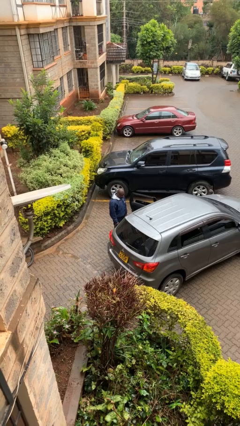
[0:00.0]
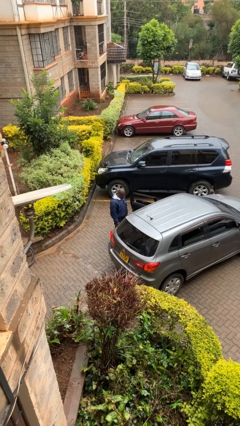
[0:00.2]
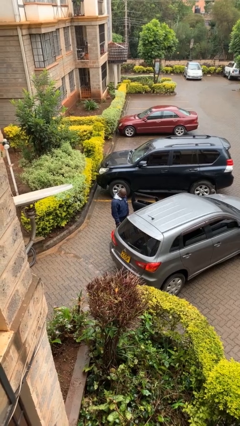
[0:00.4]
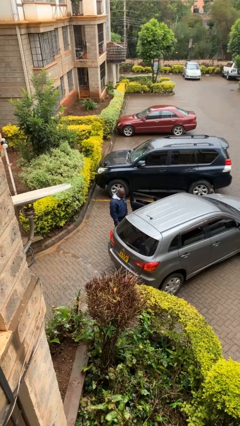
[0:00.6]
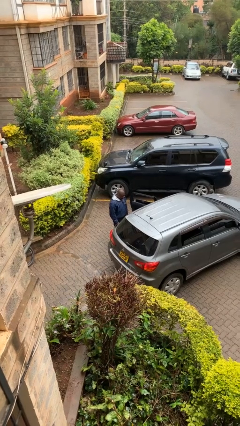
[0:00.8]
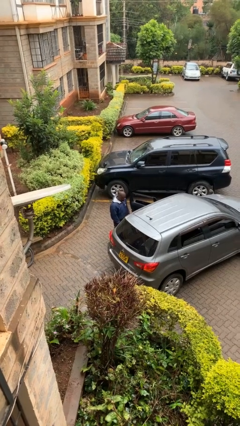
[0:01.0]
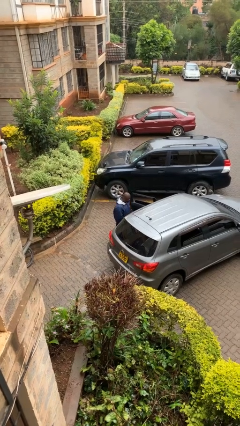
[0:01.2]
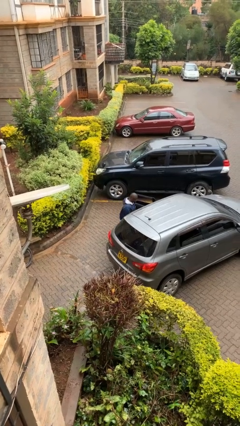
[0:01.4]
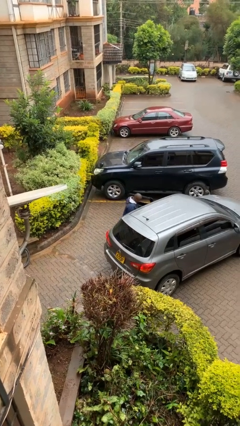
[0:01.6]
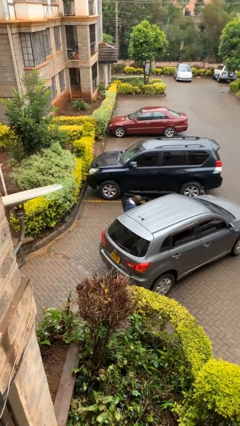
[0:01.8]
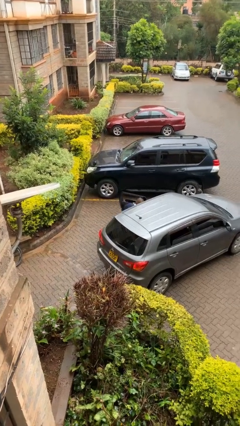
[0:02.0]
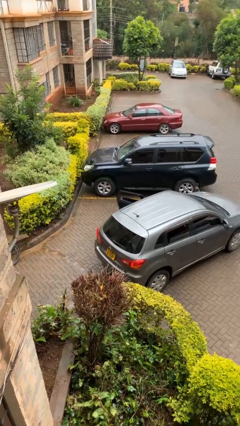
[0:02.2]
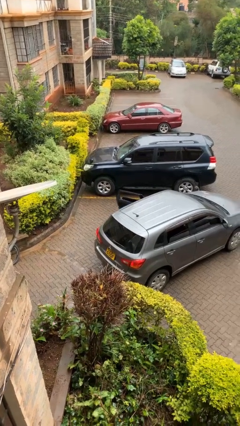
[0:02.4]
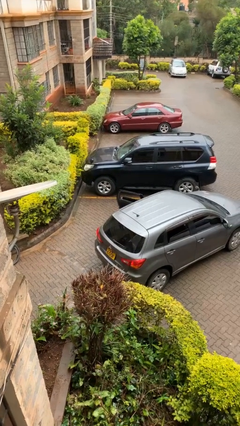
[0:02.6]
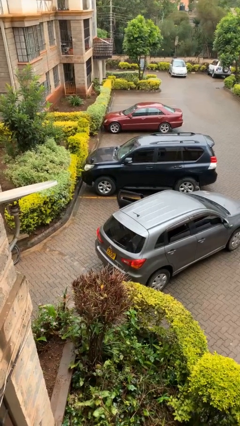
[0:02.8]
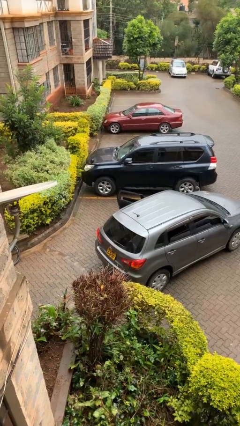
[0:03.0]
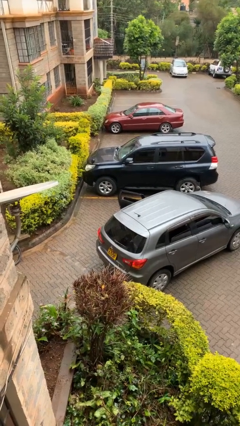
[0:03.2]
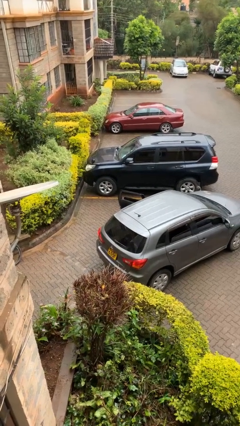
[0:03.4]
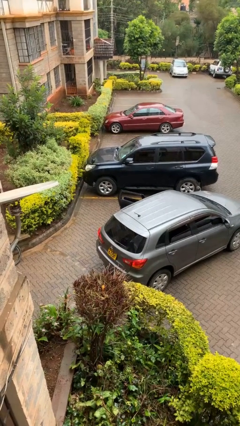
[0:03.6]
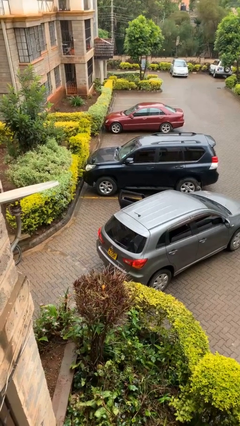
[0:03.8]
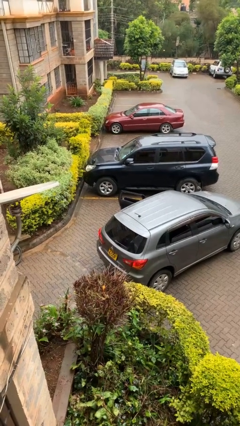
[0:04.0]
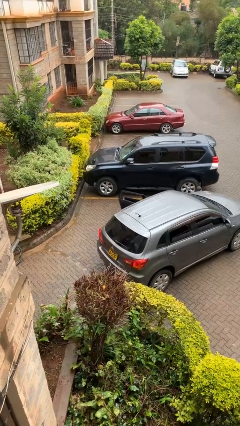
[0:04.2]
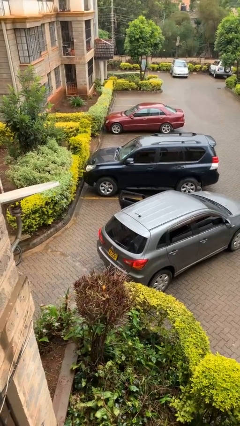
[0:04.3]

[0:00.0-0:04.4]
person enters car

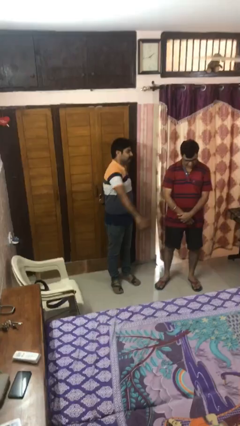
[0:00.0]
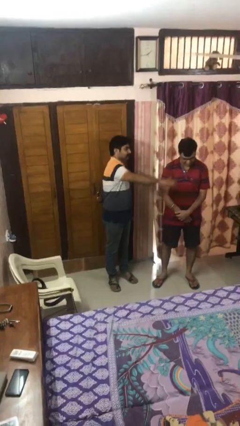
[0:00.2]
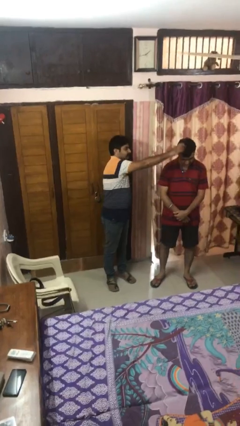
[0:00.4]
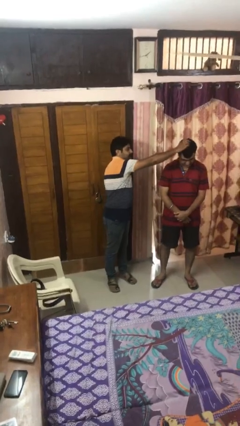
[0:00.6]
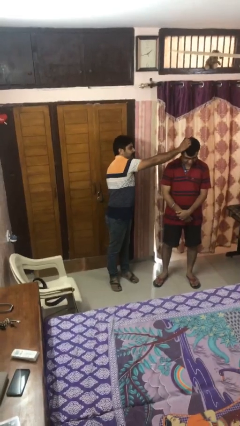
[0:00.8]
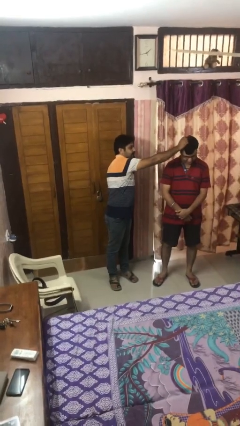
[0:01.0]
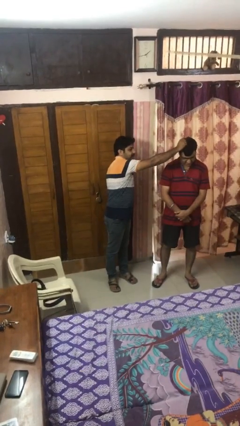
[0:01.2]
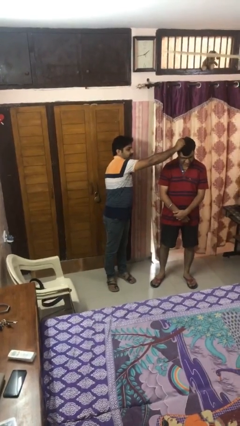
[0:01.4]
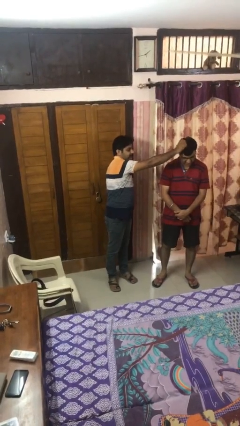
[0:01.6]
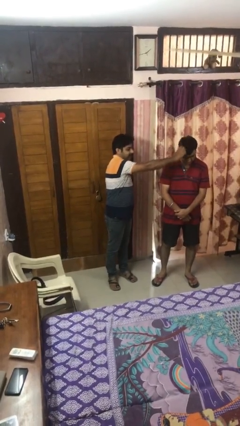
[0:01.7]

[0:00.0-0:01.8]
person grabs person by hair

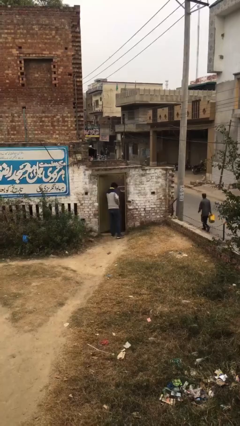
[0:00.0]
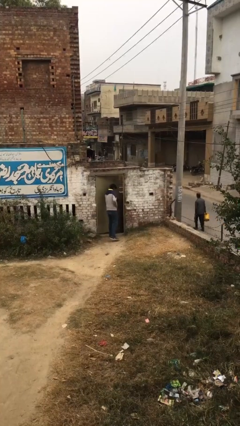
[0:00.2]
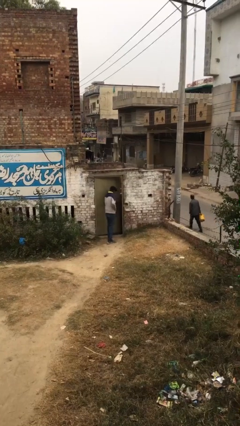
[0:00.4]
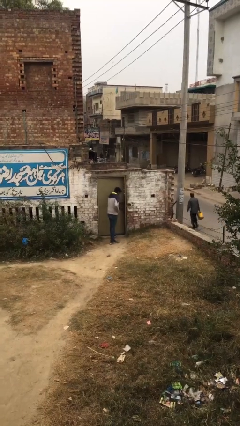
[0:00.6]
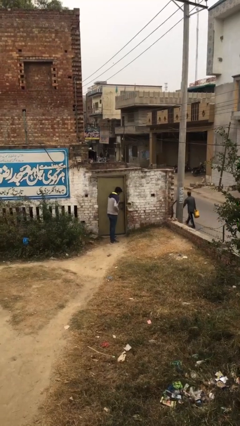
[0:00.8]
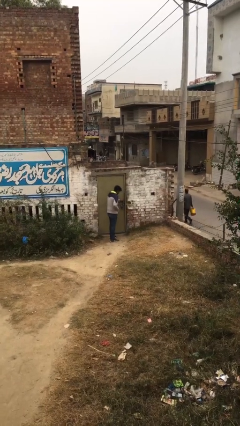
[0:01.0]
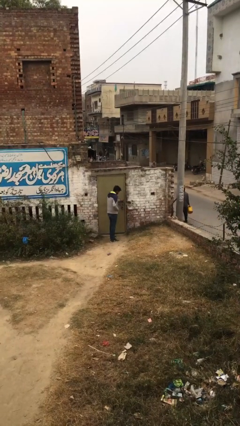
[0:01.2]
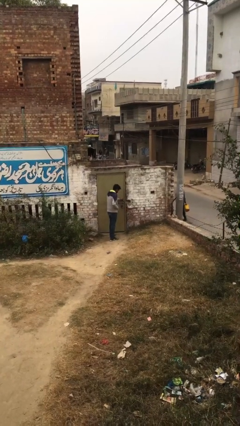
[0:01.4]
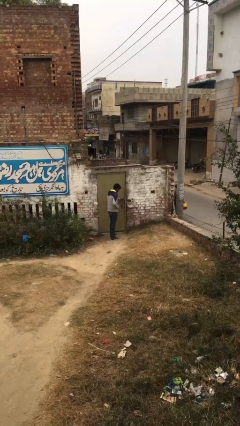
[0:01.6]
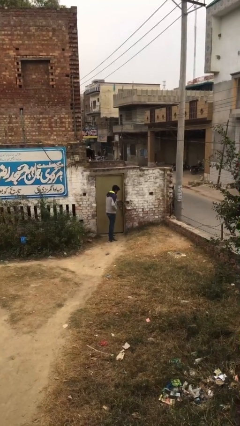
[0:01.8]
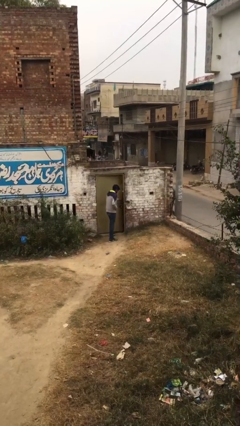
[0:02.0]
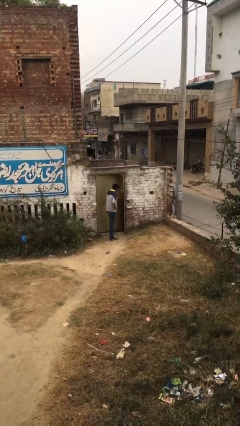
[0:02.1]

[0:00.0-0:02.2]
person closes facility door

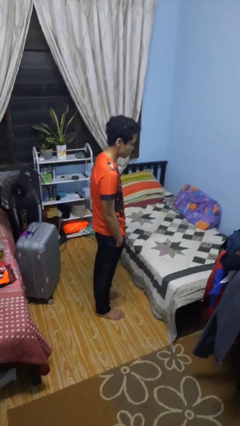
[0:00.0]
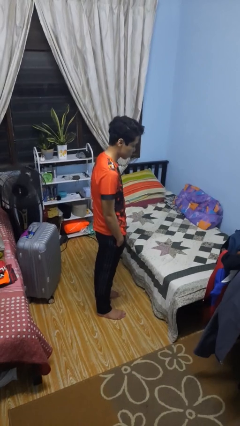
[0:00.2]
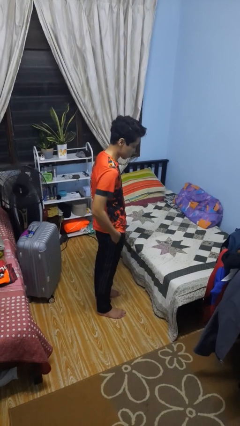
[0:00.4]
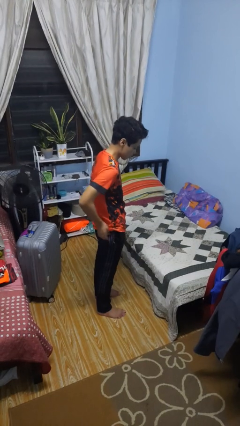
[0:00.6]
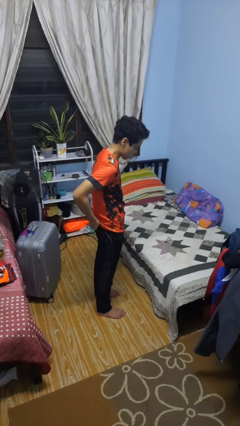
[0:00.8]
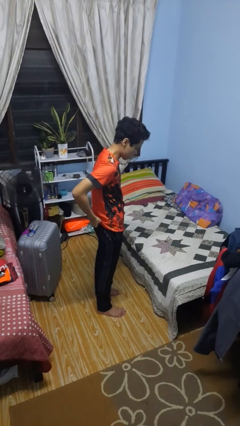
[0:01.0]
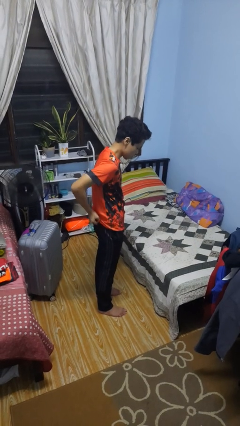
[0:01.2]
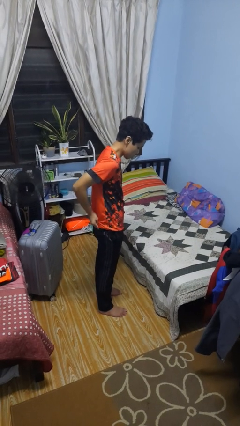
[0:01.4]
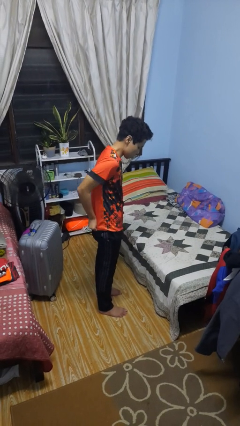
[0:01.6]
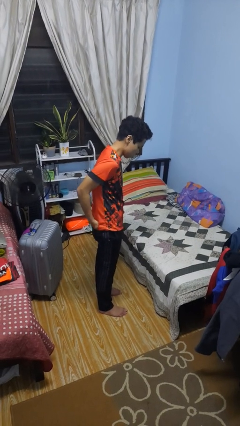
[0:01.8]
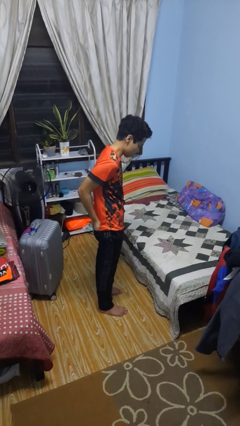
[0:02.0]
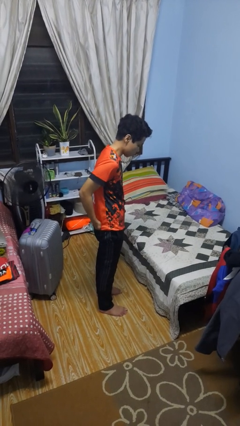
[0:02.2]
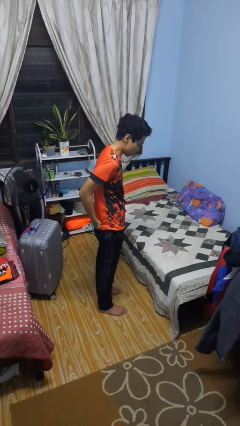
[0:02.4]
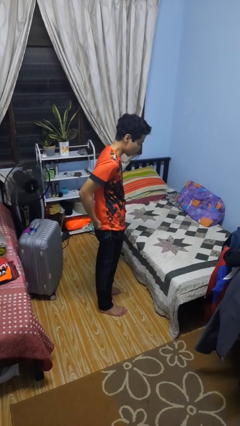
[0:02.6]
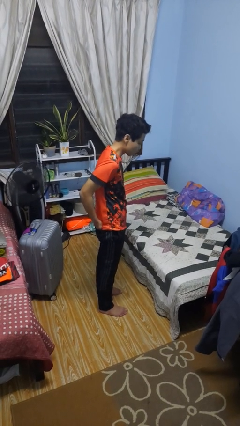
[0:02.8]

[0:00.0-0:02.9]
person puts hands in back pockets

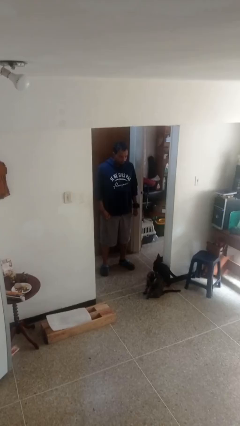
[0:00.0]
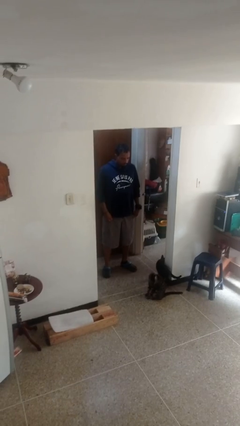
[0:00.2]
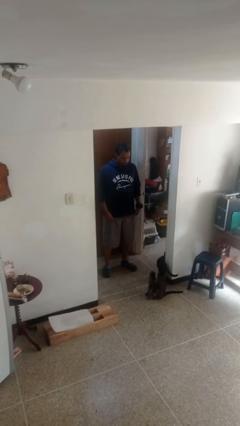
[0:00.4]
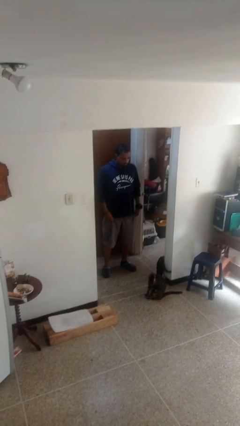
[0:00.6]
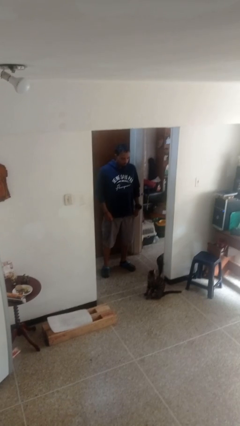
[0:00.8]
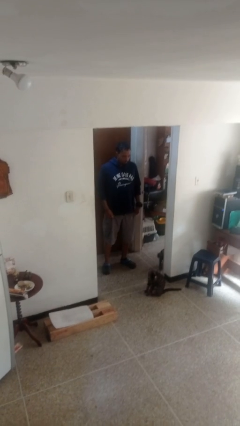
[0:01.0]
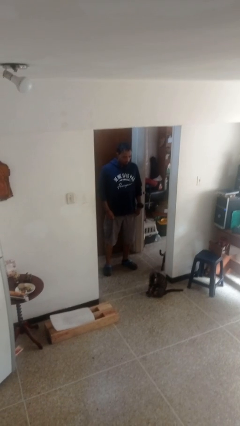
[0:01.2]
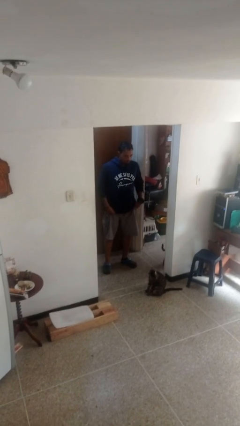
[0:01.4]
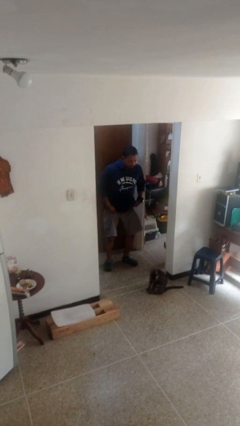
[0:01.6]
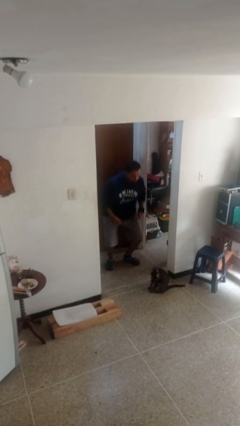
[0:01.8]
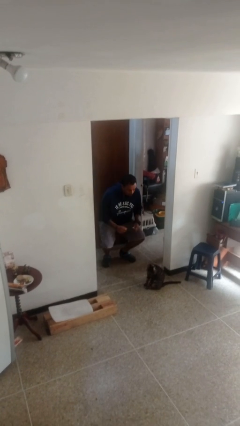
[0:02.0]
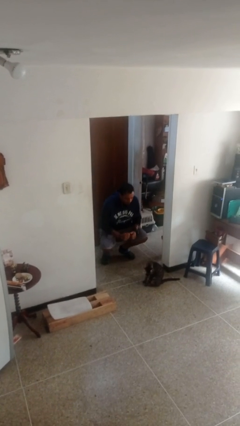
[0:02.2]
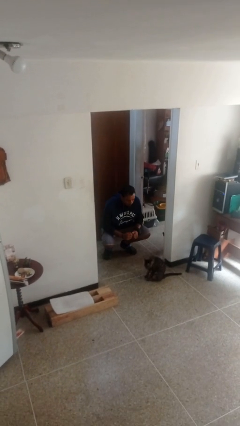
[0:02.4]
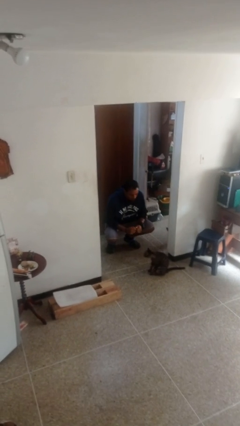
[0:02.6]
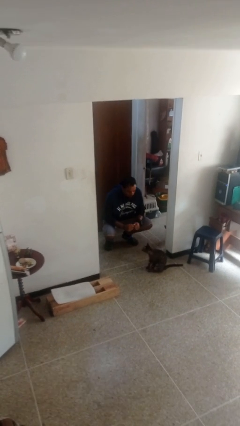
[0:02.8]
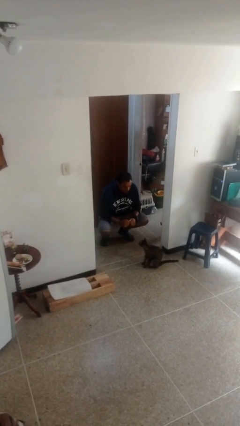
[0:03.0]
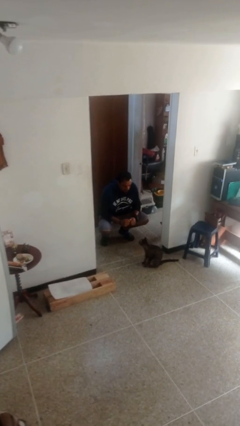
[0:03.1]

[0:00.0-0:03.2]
person squats

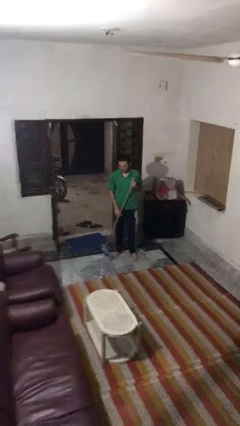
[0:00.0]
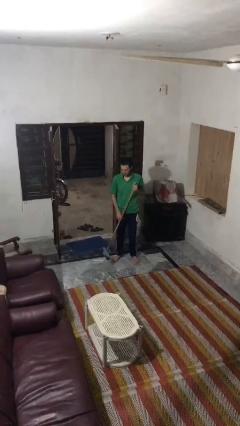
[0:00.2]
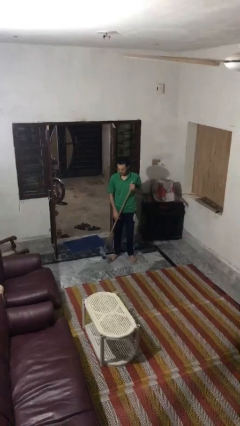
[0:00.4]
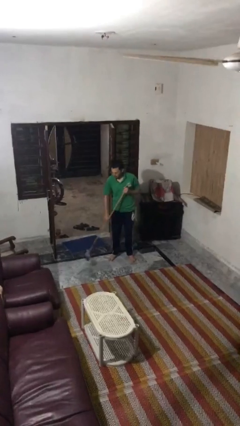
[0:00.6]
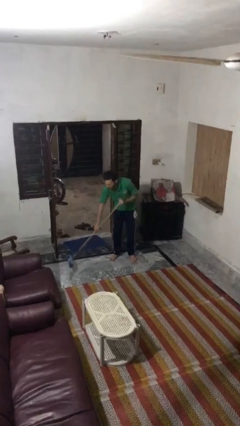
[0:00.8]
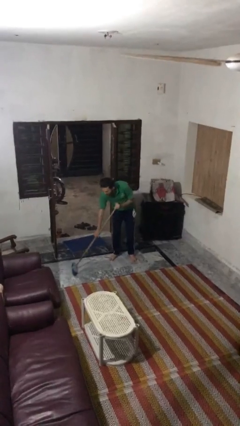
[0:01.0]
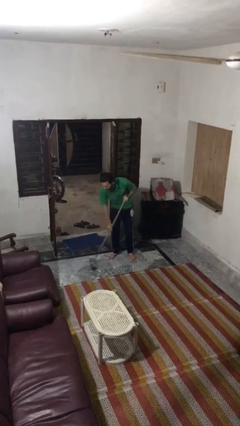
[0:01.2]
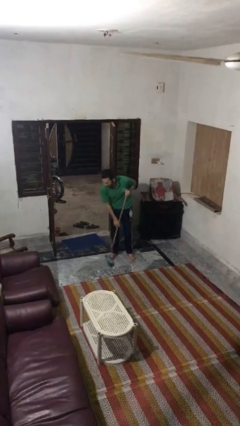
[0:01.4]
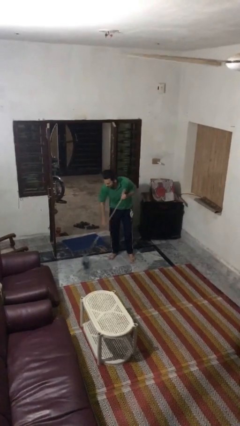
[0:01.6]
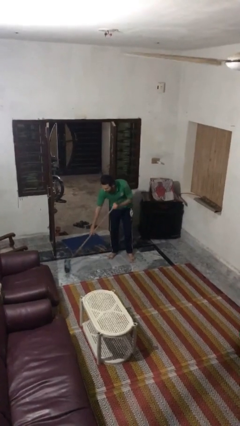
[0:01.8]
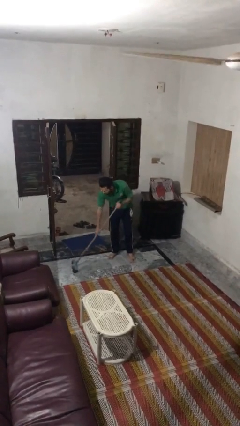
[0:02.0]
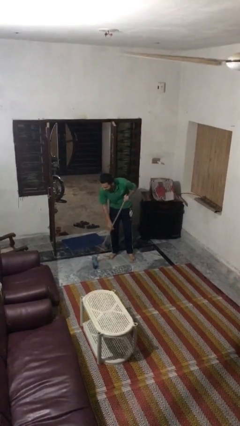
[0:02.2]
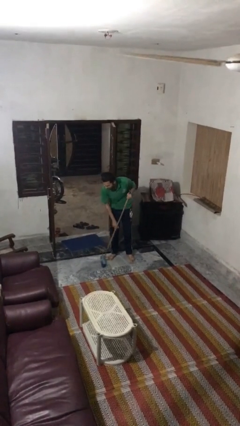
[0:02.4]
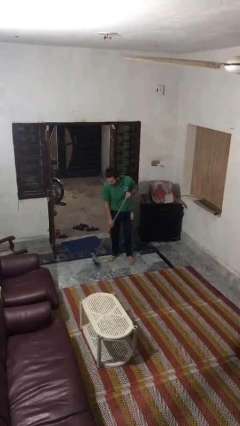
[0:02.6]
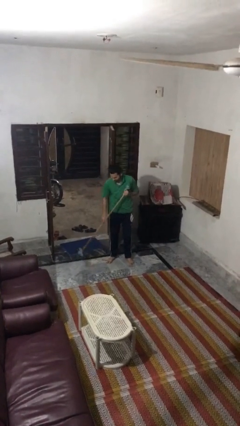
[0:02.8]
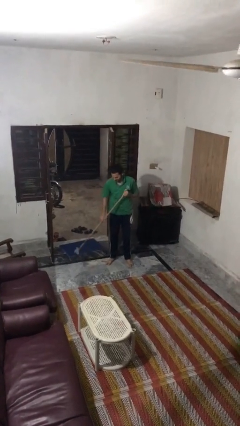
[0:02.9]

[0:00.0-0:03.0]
person sweeps floor
